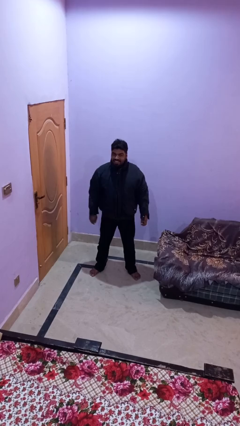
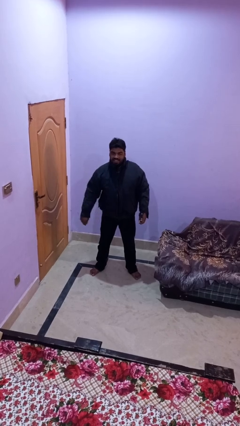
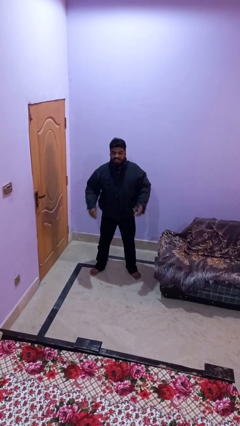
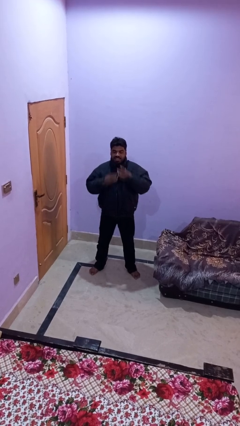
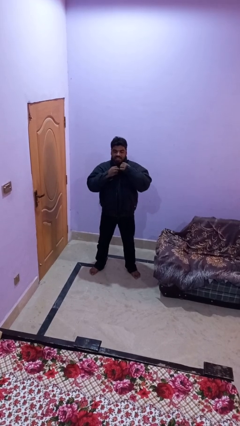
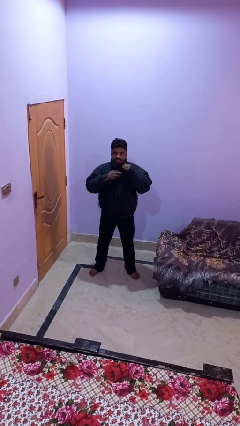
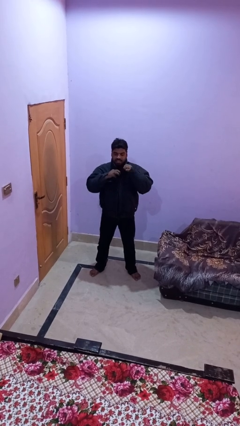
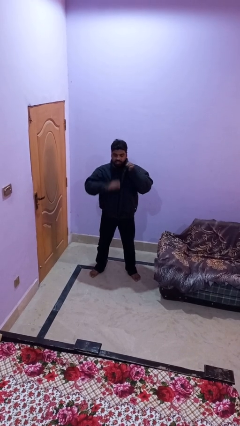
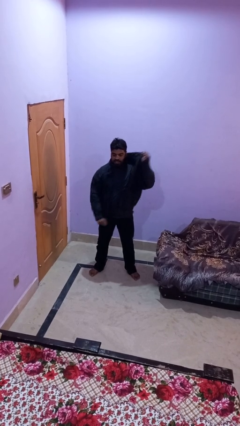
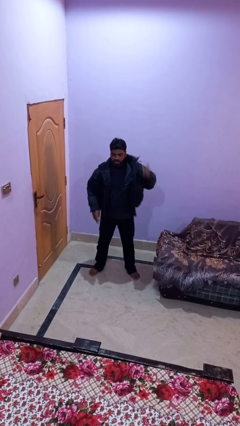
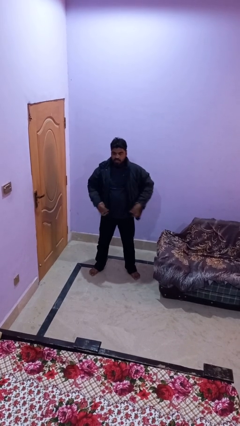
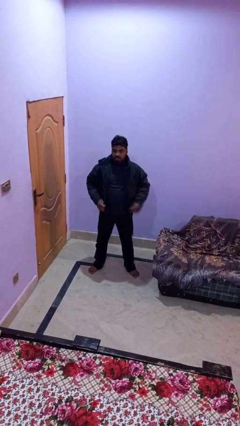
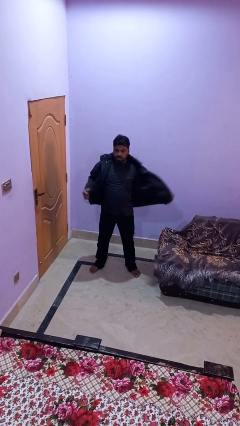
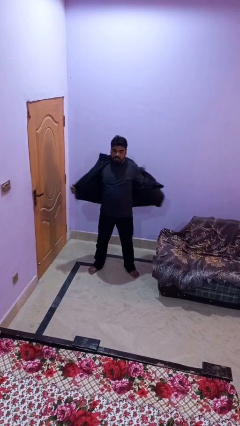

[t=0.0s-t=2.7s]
person unzips jacket

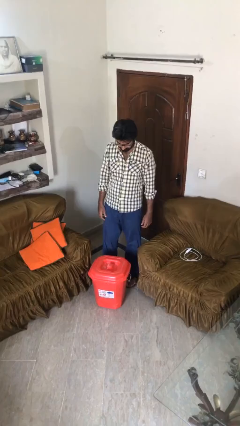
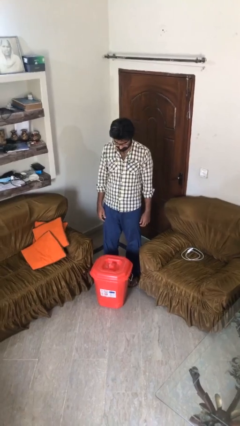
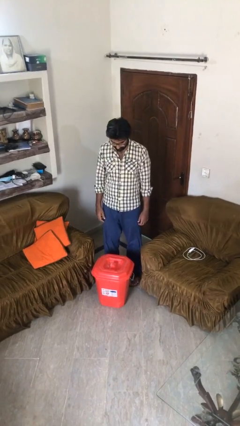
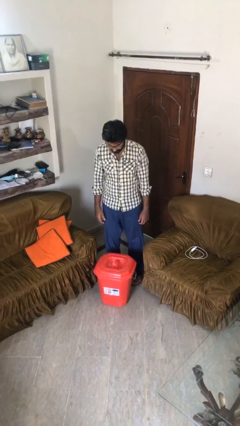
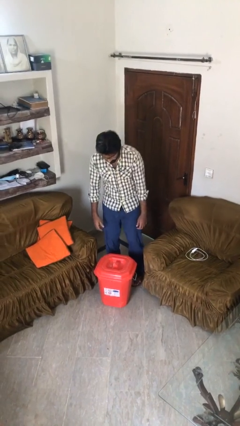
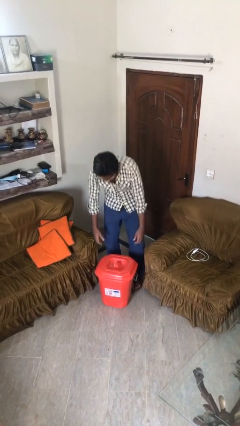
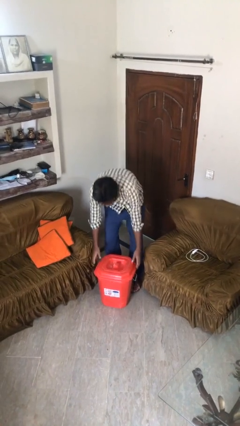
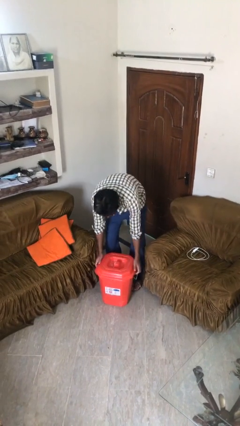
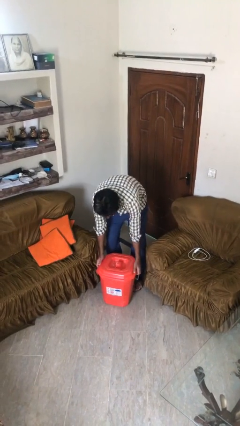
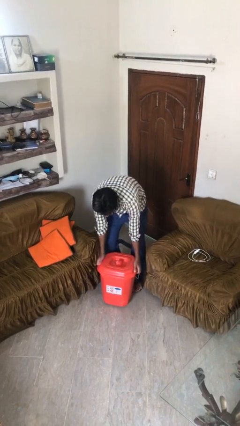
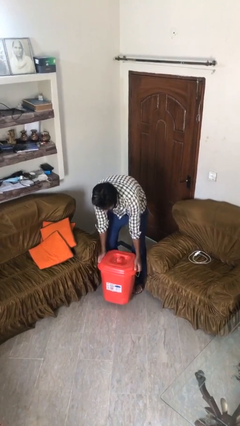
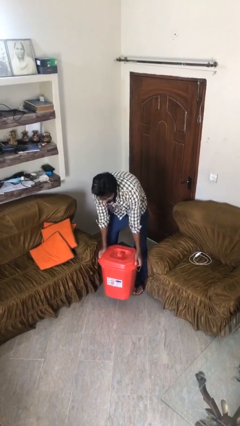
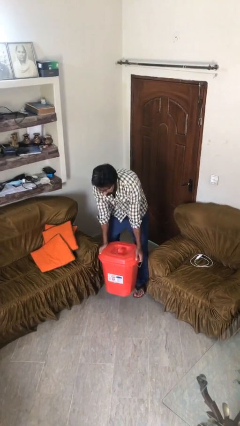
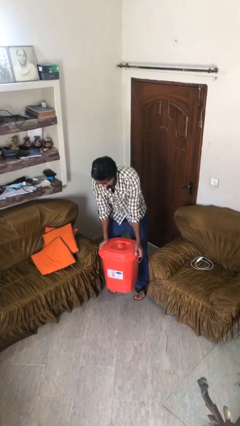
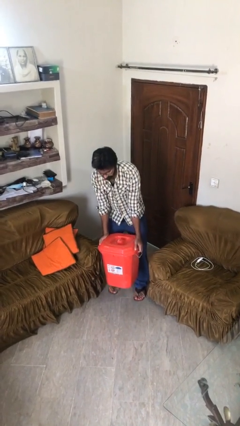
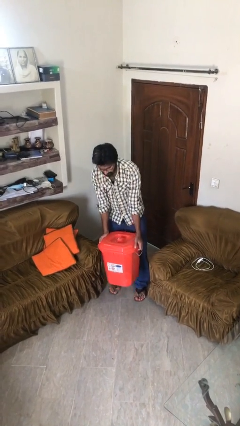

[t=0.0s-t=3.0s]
person picks up object from floor

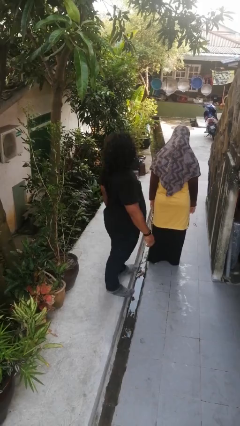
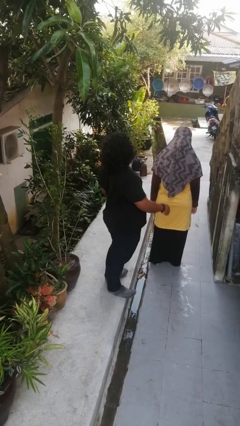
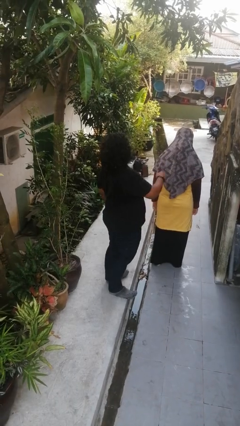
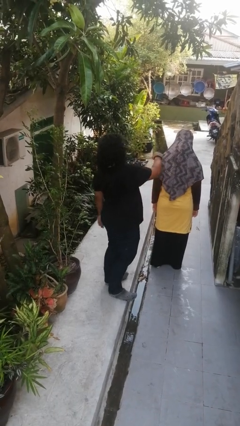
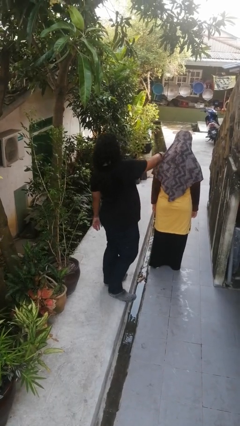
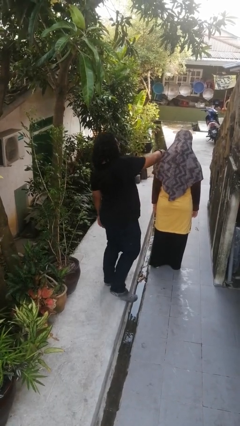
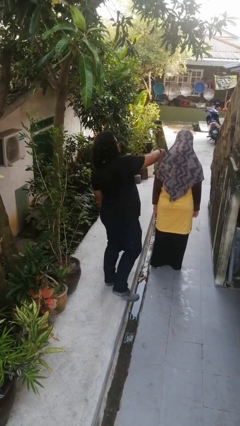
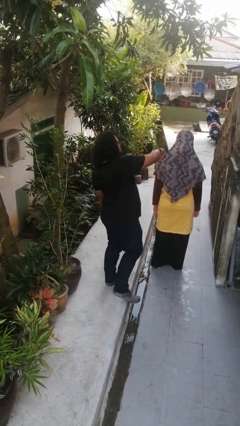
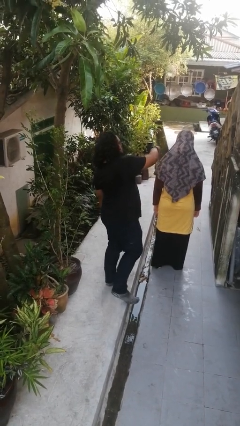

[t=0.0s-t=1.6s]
person touches back of person

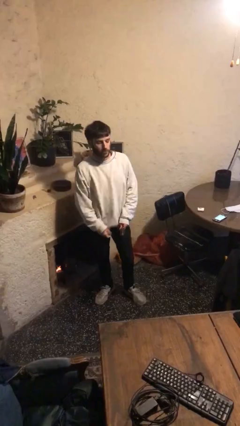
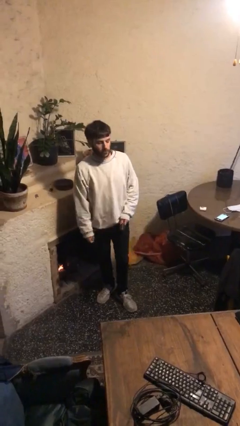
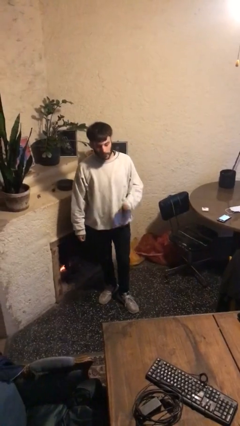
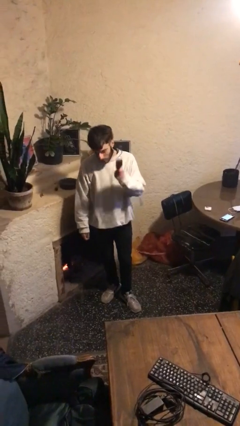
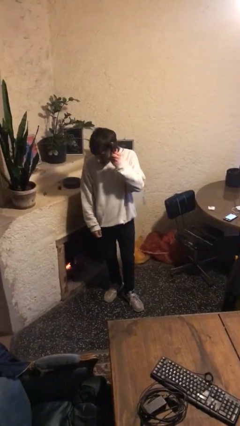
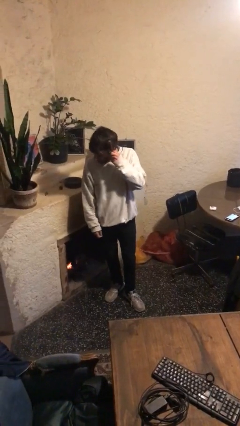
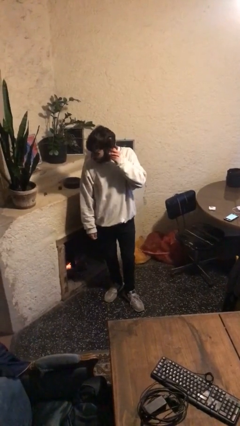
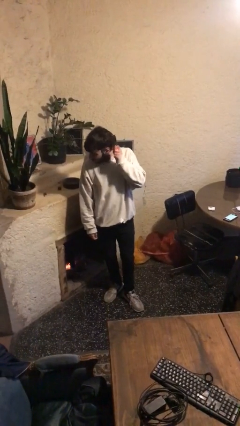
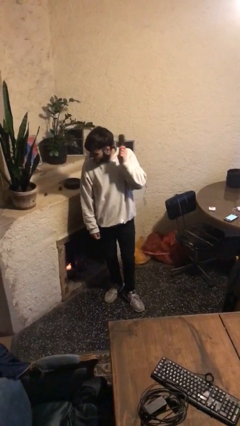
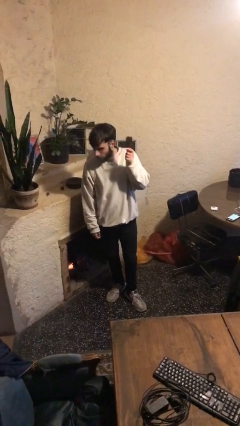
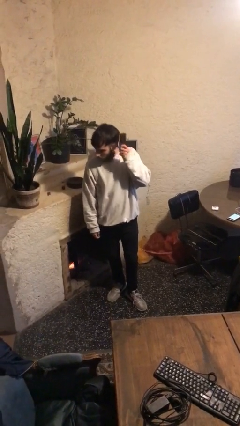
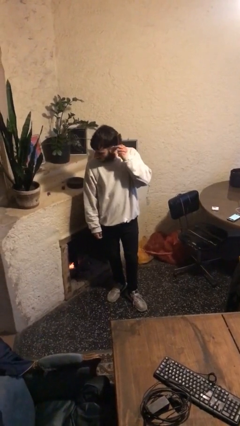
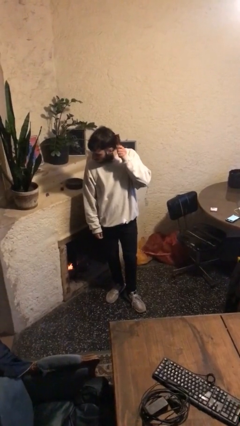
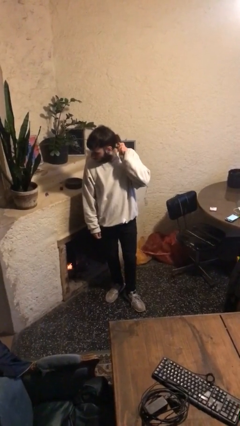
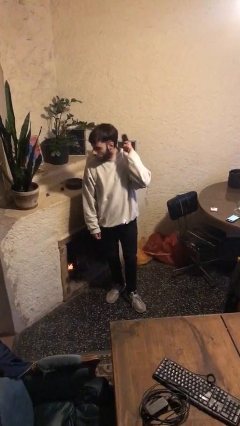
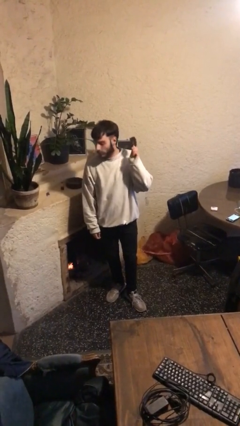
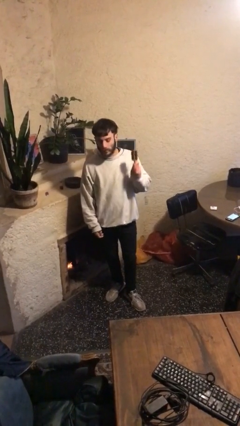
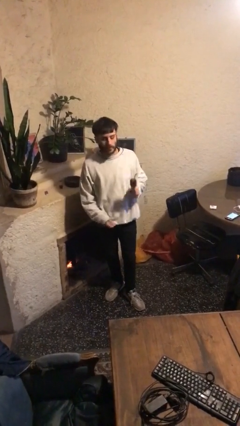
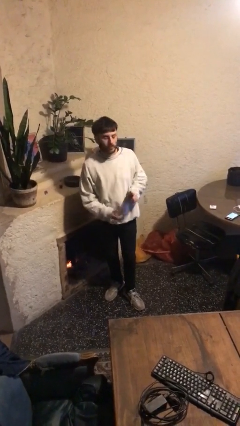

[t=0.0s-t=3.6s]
person brushes hair

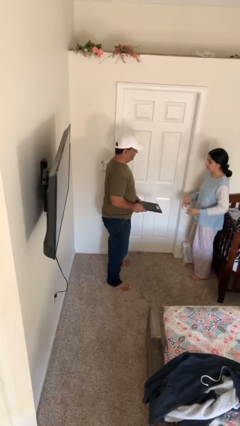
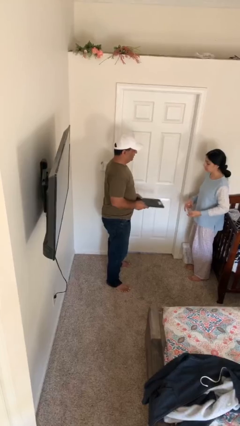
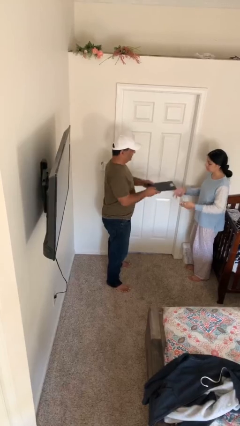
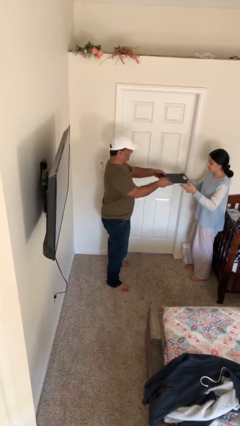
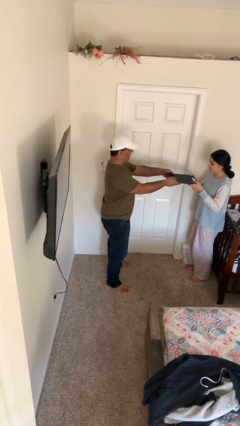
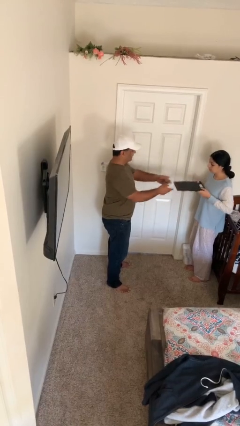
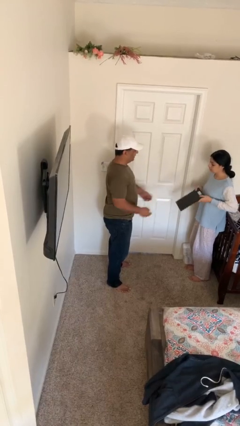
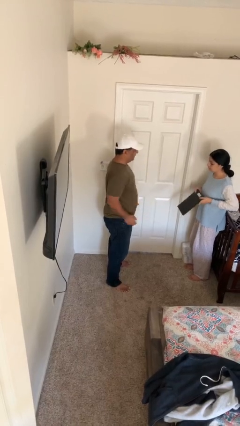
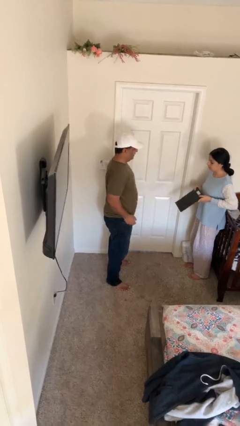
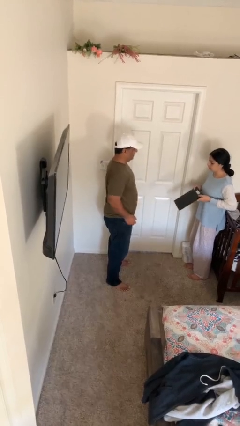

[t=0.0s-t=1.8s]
person transfers object to person

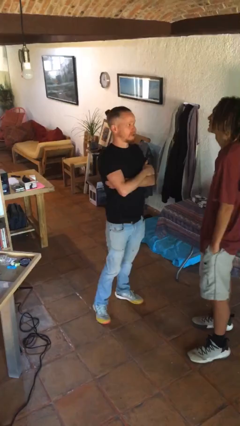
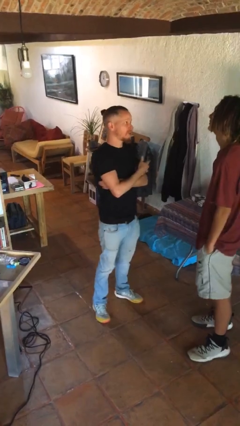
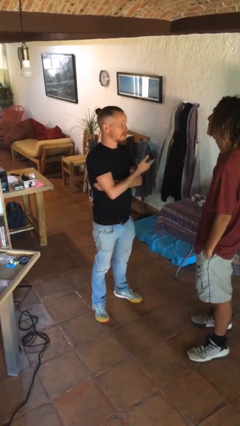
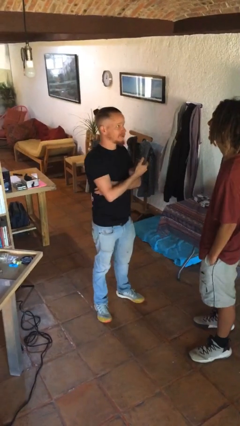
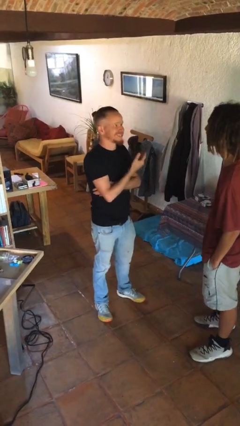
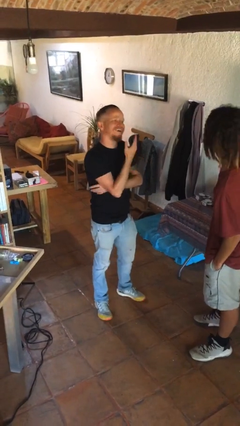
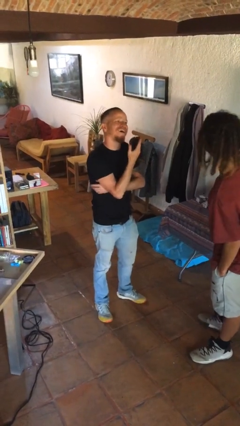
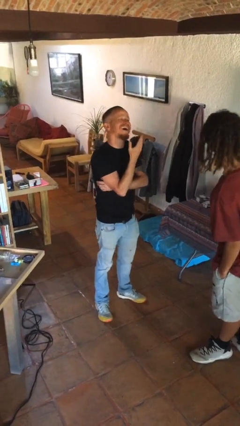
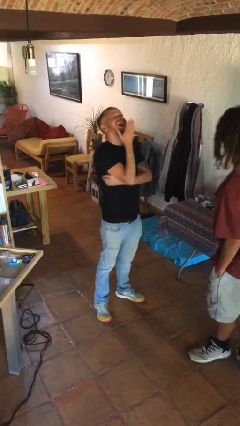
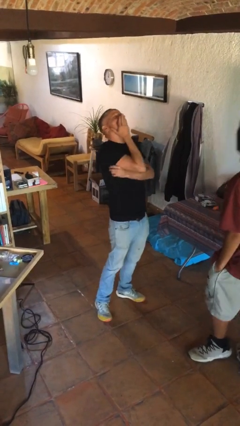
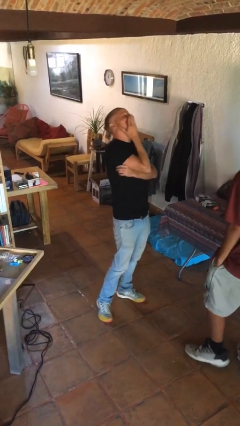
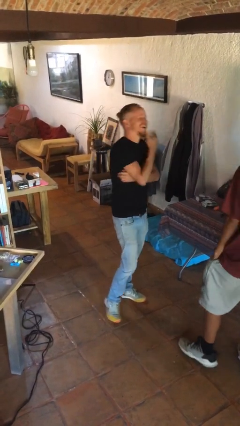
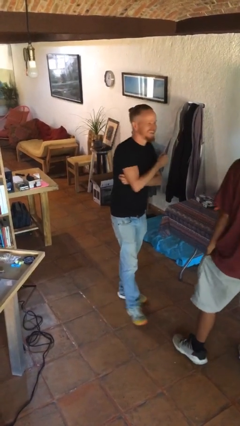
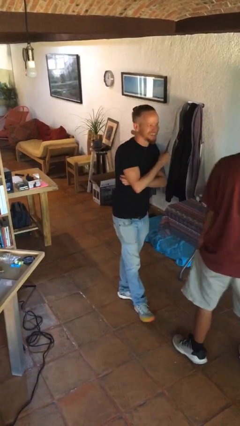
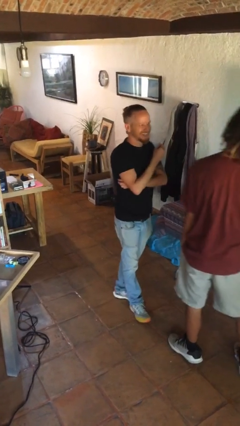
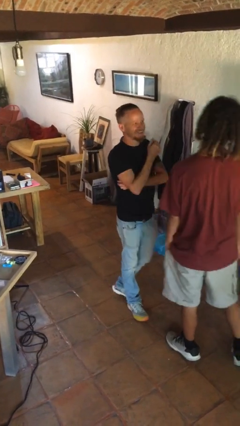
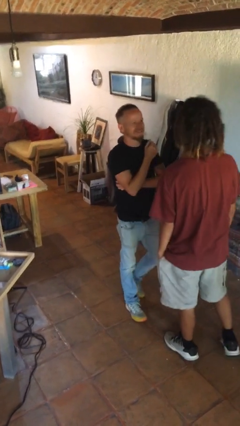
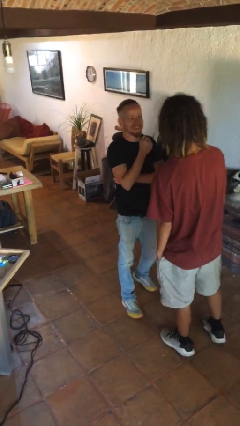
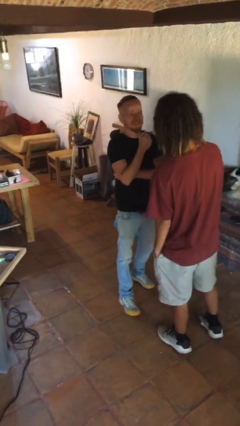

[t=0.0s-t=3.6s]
person laughs with person

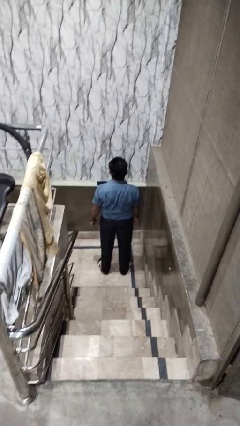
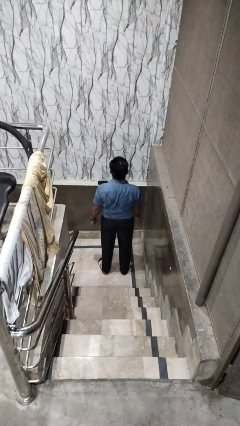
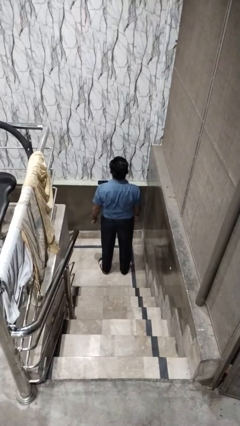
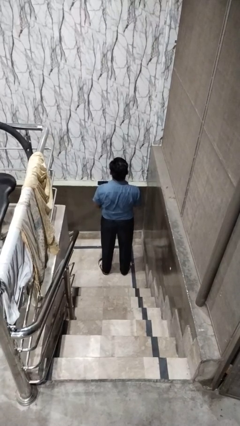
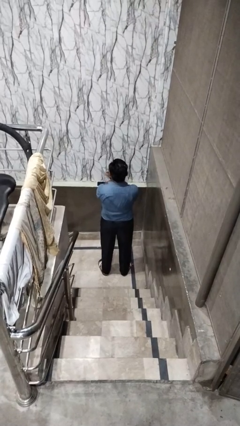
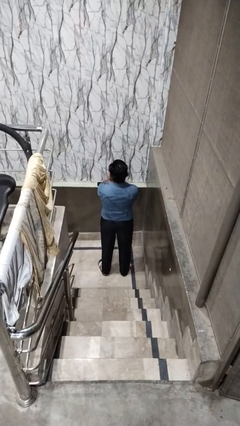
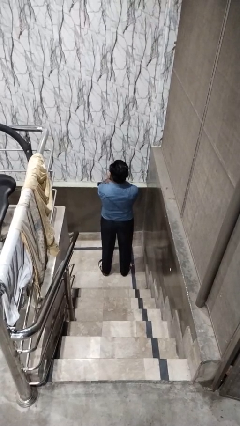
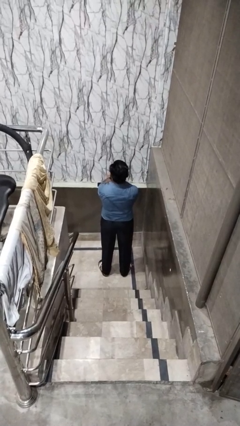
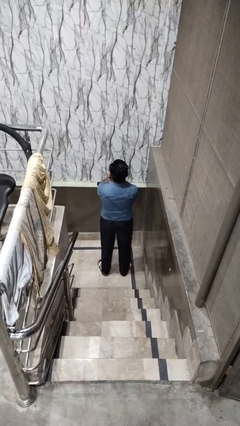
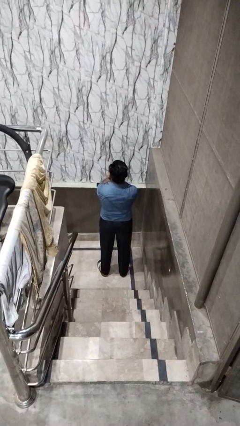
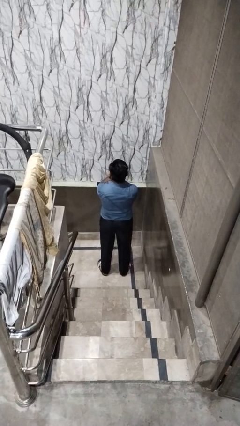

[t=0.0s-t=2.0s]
person gestures arms x
